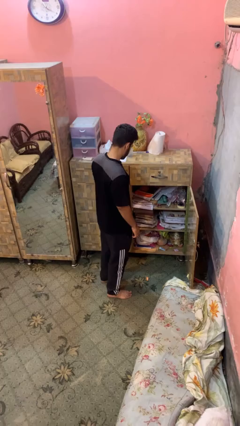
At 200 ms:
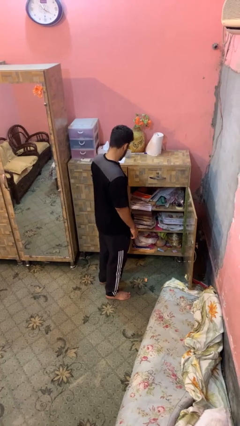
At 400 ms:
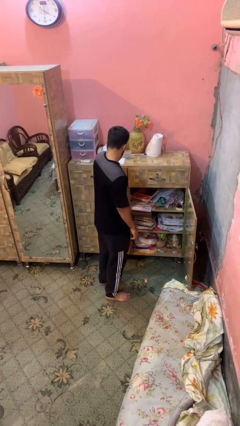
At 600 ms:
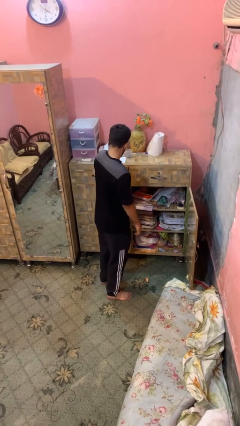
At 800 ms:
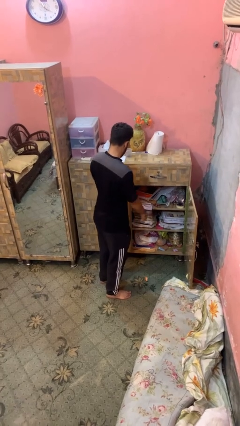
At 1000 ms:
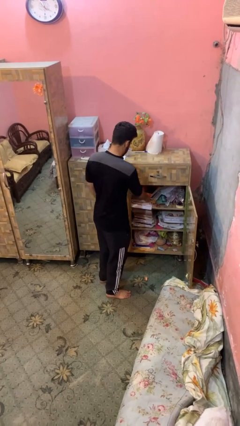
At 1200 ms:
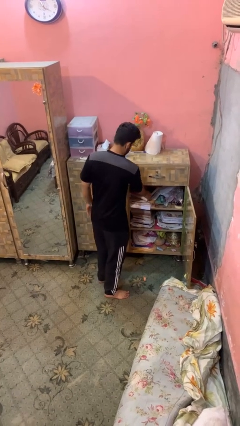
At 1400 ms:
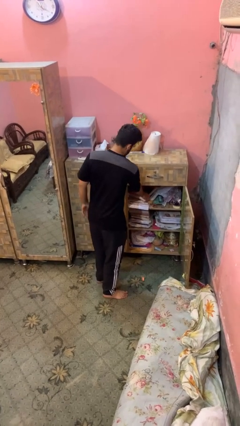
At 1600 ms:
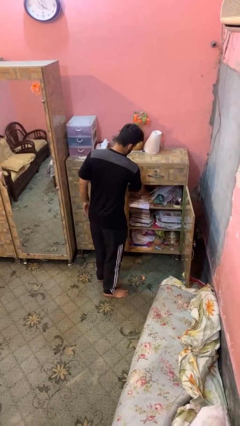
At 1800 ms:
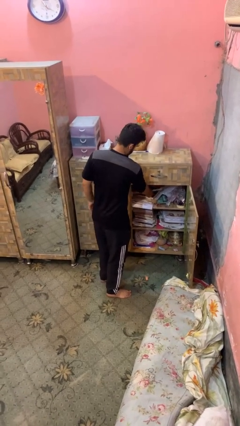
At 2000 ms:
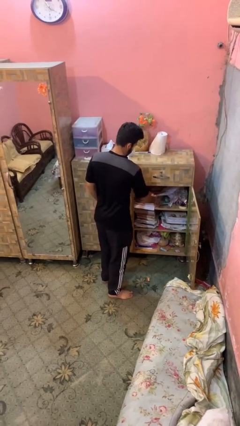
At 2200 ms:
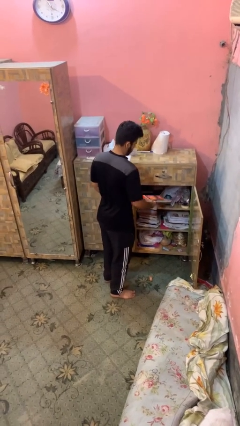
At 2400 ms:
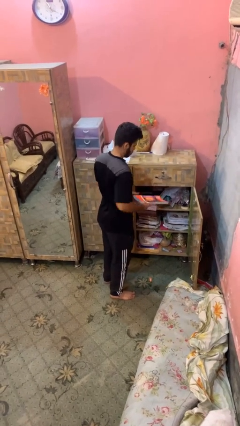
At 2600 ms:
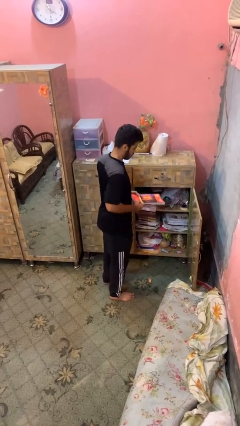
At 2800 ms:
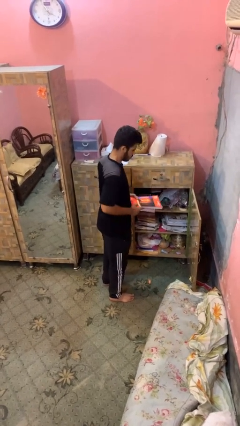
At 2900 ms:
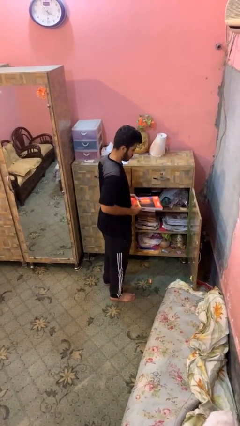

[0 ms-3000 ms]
person picks up object from cabinet

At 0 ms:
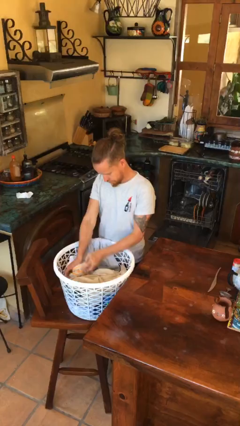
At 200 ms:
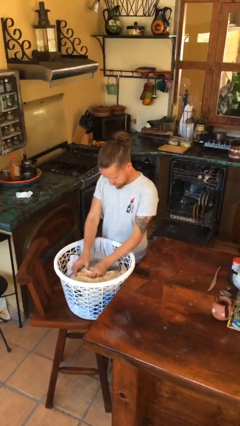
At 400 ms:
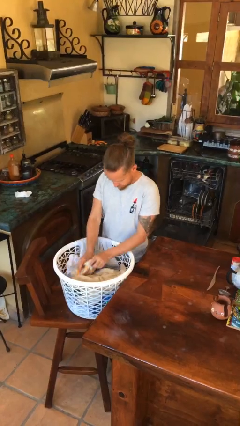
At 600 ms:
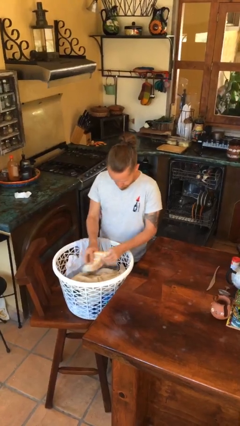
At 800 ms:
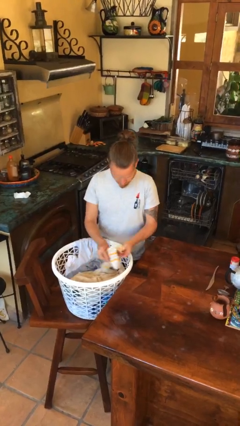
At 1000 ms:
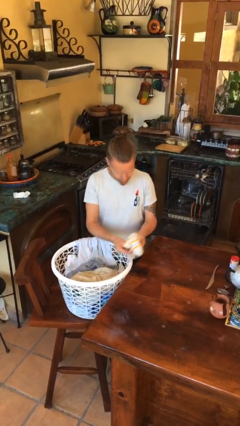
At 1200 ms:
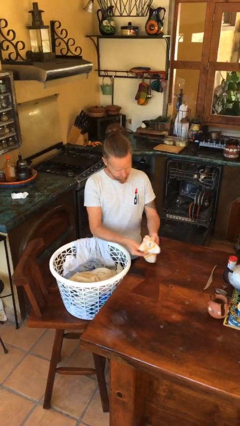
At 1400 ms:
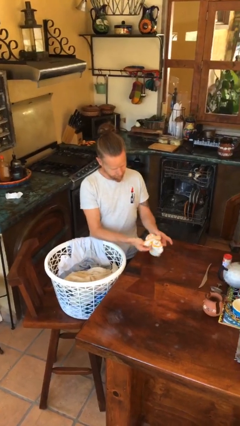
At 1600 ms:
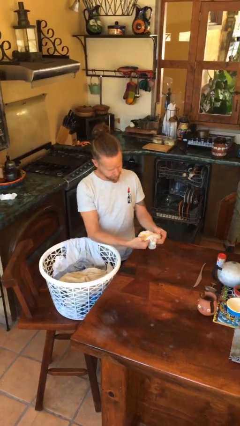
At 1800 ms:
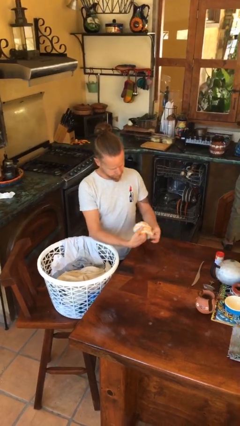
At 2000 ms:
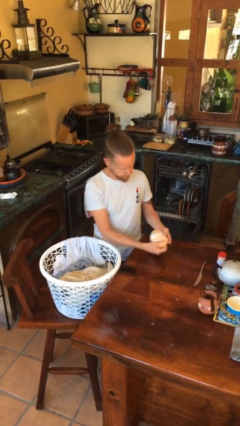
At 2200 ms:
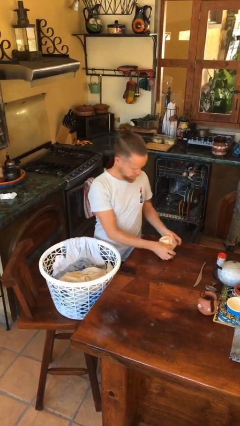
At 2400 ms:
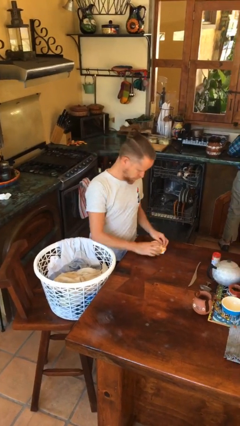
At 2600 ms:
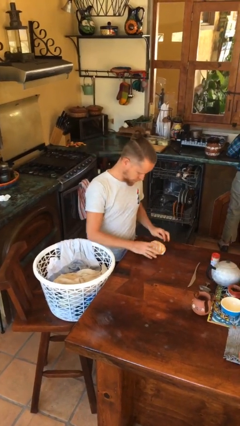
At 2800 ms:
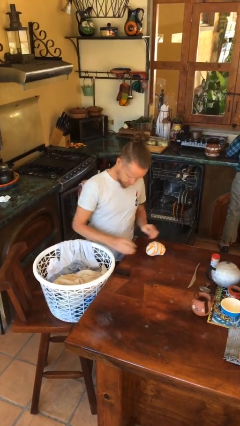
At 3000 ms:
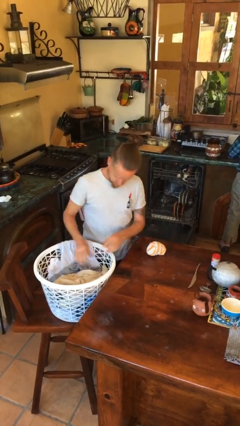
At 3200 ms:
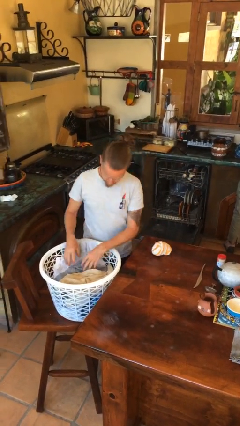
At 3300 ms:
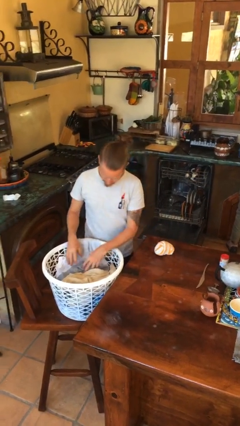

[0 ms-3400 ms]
person folds socks

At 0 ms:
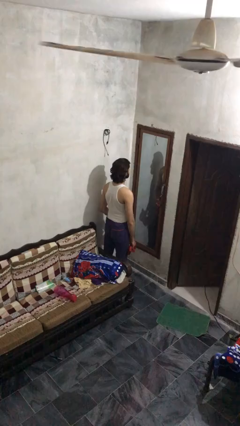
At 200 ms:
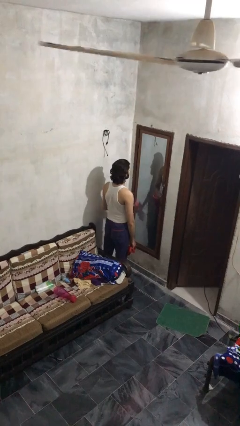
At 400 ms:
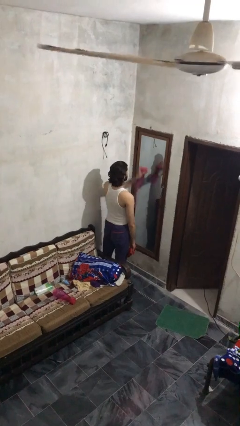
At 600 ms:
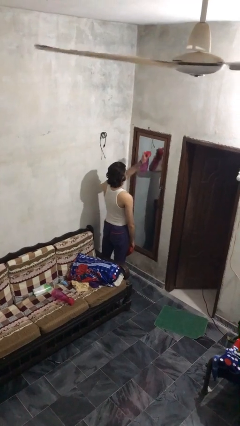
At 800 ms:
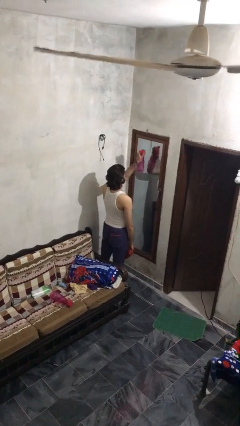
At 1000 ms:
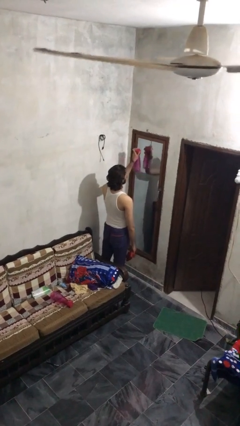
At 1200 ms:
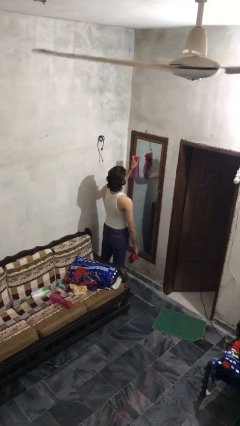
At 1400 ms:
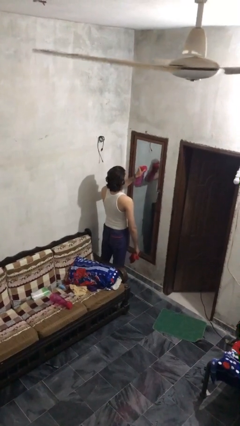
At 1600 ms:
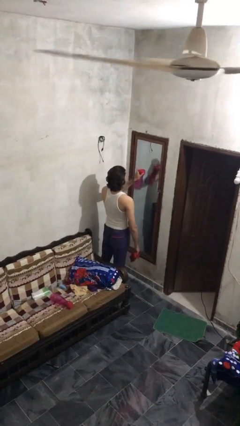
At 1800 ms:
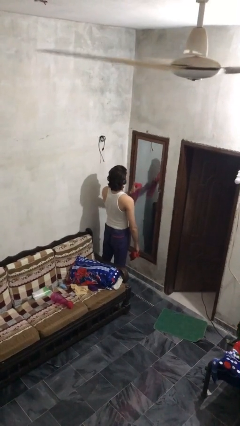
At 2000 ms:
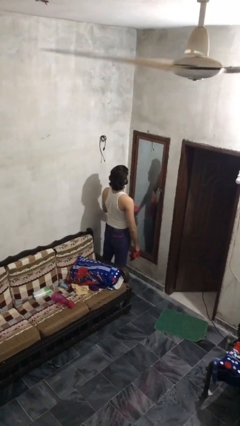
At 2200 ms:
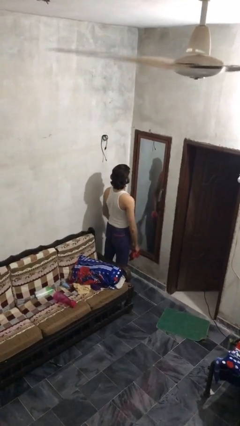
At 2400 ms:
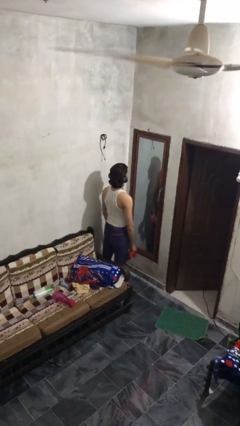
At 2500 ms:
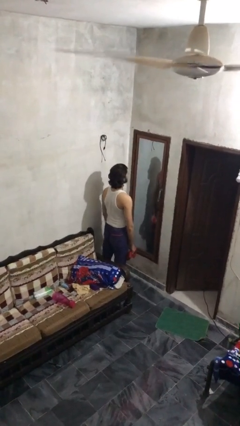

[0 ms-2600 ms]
person sprays from bottle

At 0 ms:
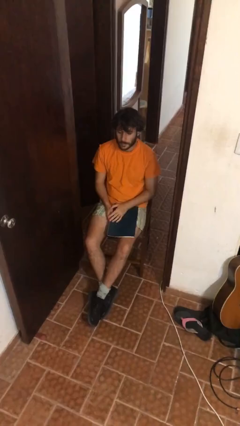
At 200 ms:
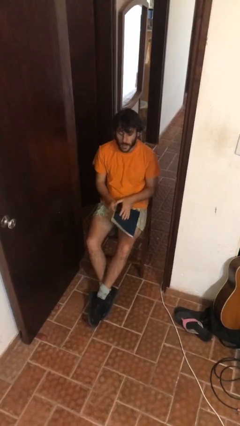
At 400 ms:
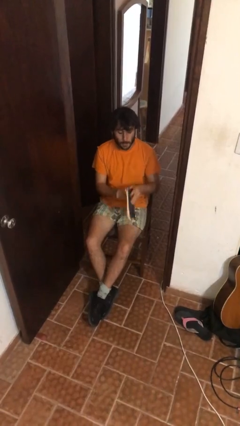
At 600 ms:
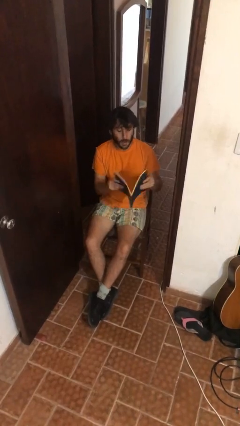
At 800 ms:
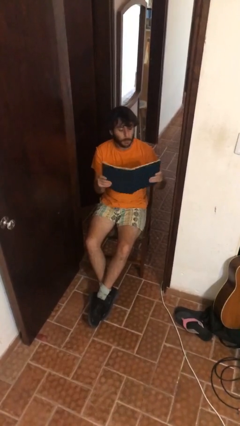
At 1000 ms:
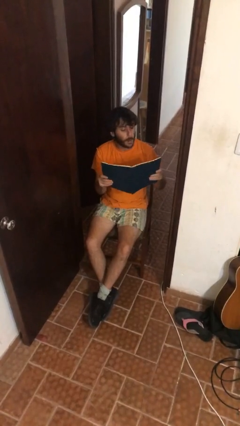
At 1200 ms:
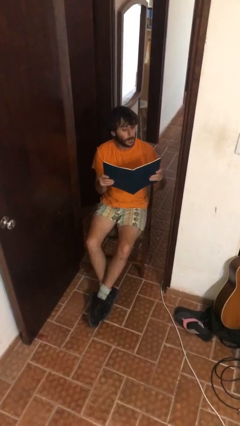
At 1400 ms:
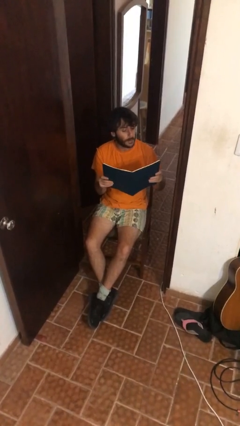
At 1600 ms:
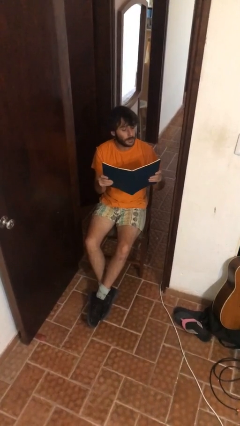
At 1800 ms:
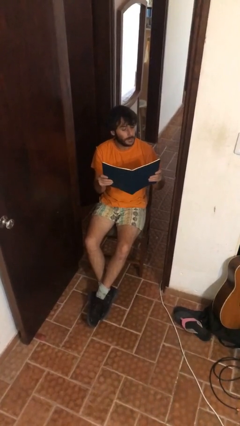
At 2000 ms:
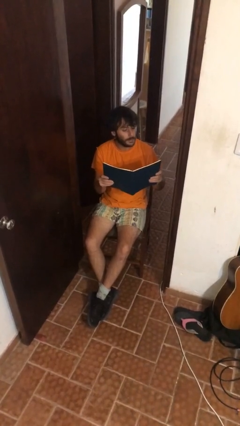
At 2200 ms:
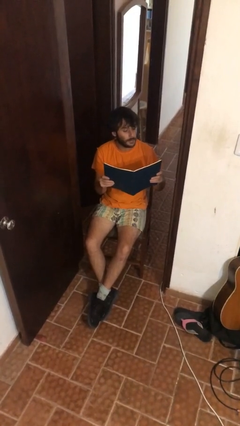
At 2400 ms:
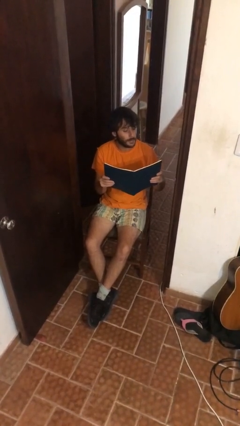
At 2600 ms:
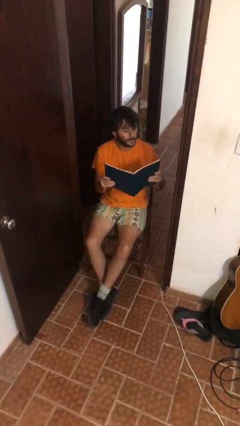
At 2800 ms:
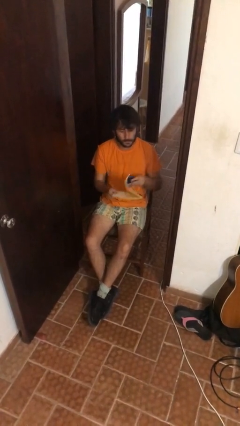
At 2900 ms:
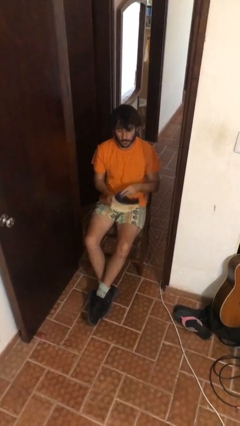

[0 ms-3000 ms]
person reads document

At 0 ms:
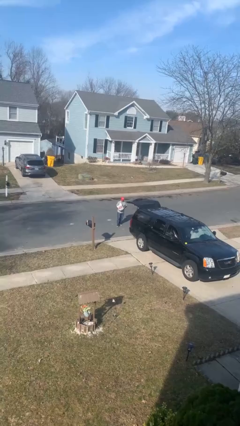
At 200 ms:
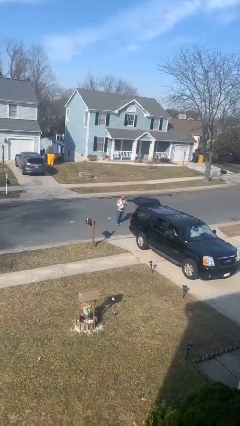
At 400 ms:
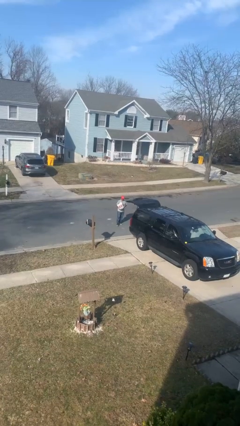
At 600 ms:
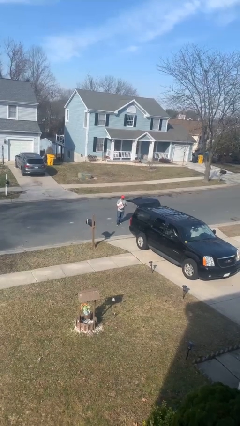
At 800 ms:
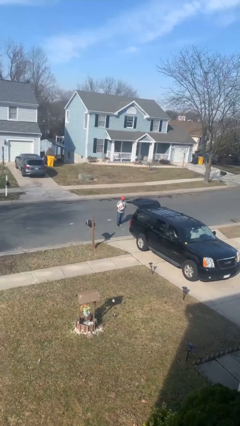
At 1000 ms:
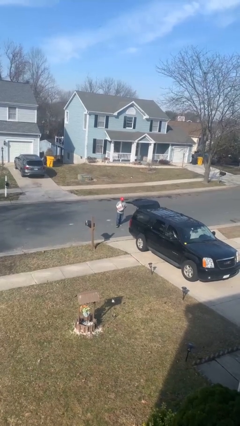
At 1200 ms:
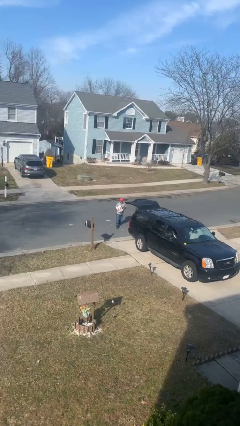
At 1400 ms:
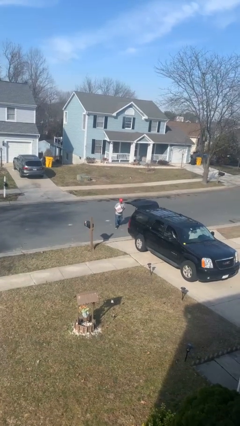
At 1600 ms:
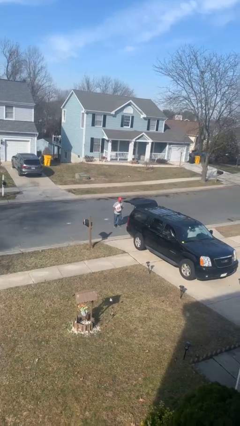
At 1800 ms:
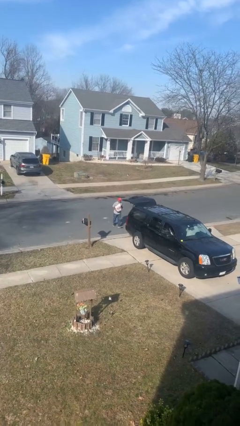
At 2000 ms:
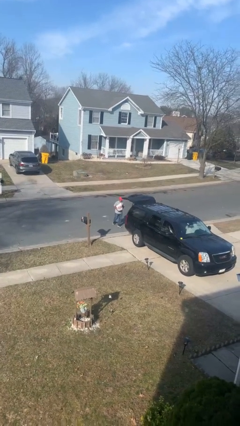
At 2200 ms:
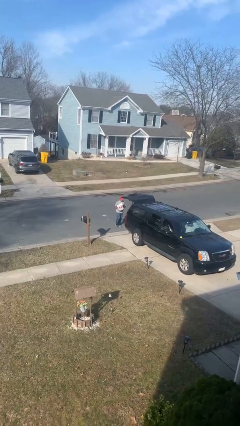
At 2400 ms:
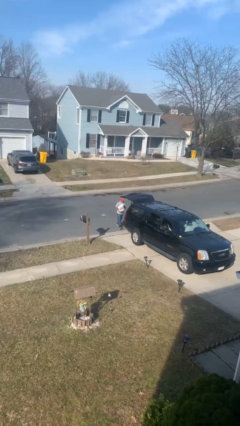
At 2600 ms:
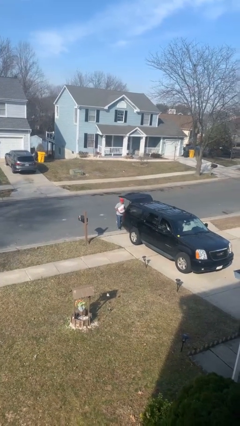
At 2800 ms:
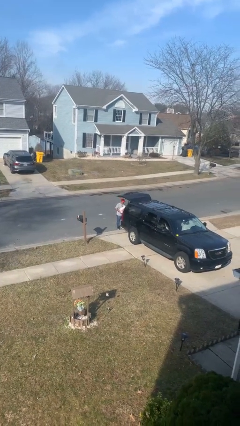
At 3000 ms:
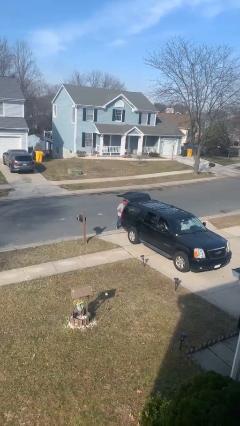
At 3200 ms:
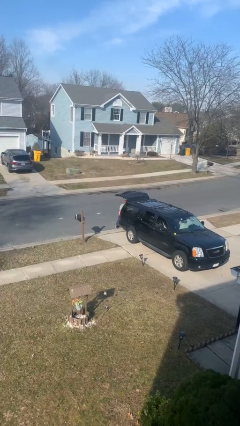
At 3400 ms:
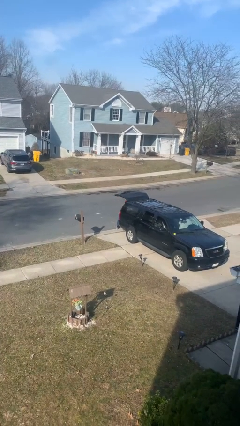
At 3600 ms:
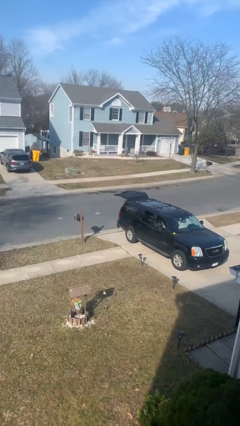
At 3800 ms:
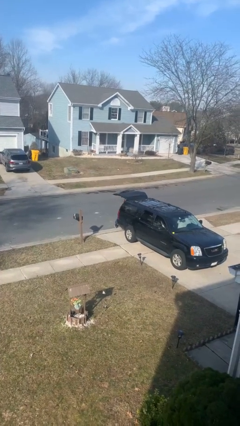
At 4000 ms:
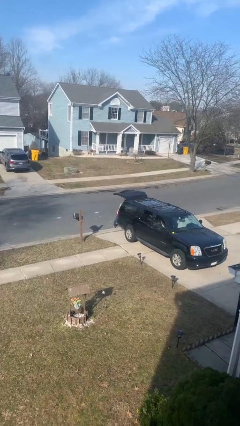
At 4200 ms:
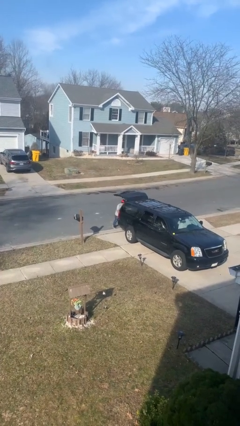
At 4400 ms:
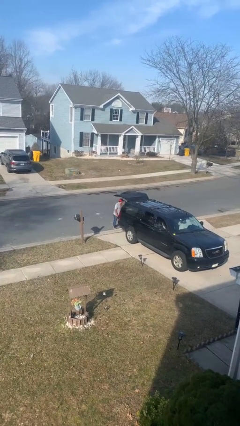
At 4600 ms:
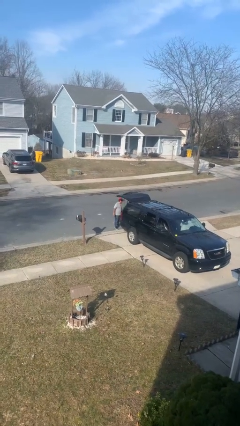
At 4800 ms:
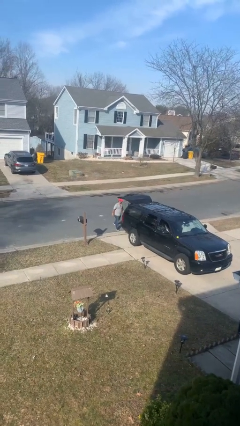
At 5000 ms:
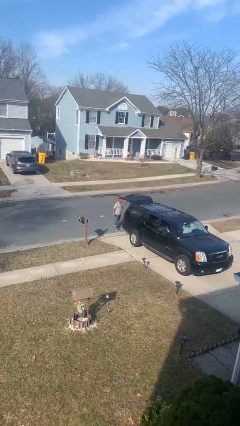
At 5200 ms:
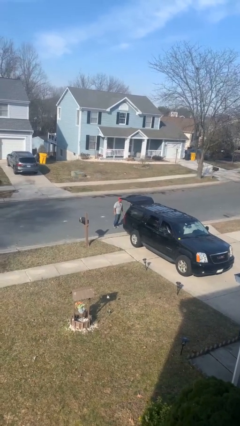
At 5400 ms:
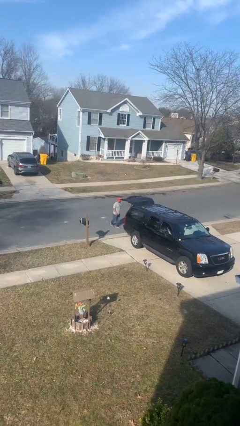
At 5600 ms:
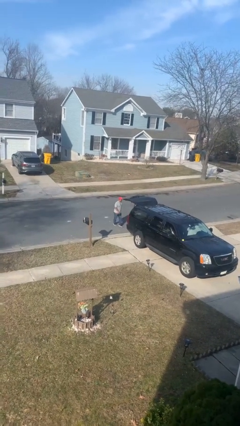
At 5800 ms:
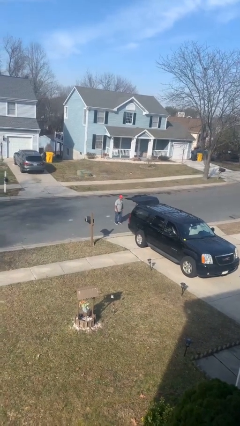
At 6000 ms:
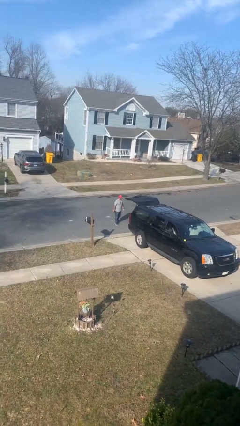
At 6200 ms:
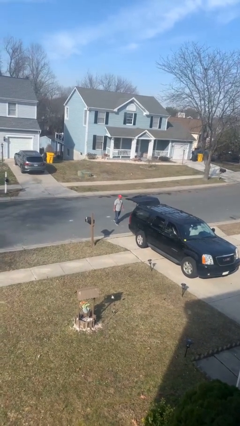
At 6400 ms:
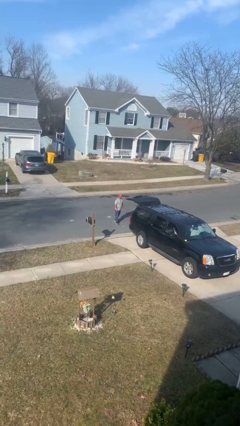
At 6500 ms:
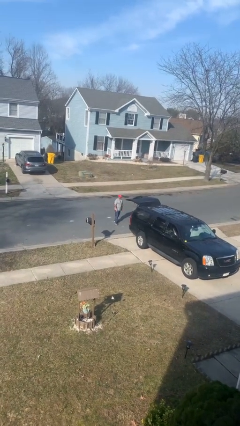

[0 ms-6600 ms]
person loads car
